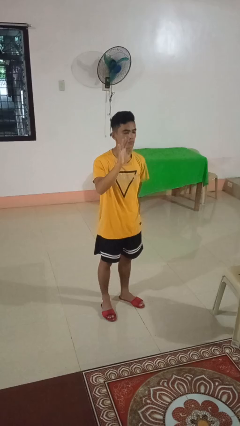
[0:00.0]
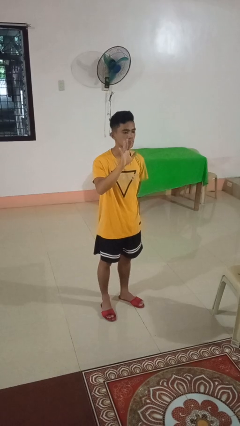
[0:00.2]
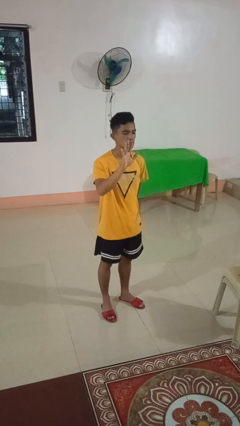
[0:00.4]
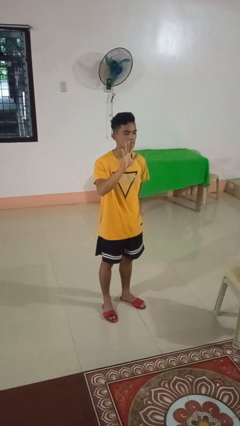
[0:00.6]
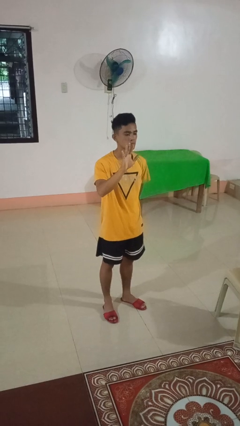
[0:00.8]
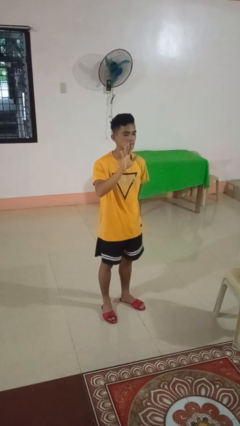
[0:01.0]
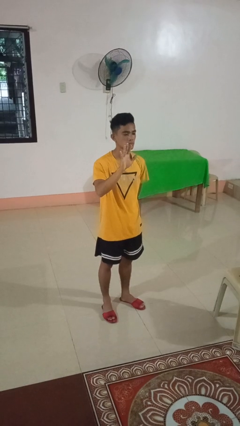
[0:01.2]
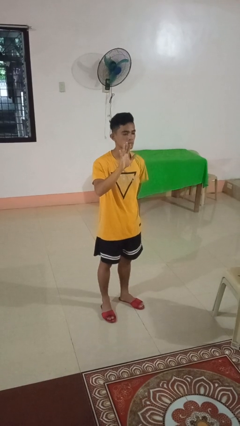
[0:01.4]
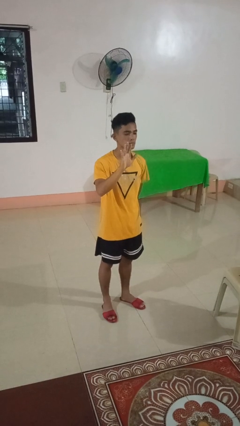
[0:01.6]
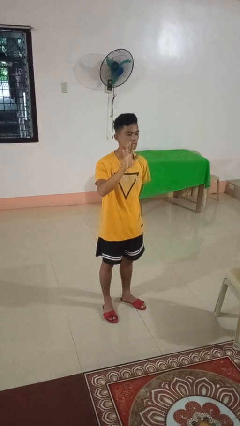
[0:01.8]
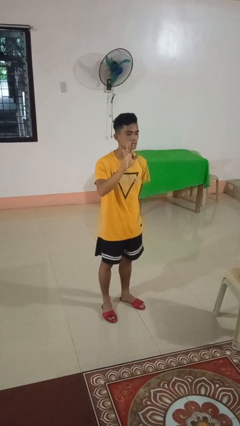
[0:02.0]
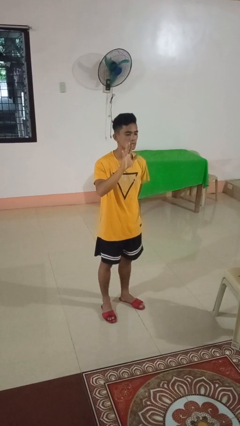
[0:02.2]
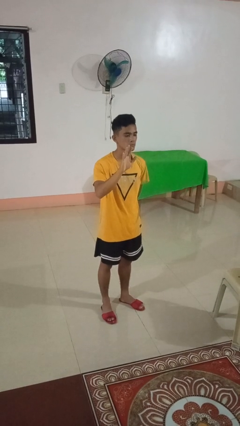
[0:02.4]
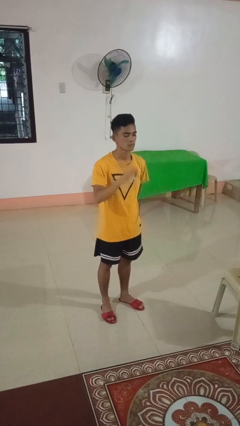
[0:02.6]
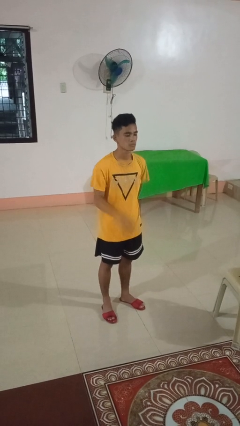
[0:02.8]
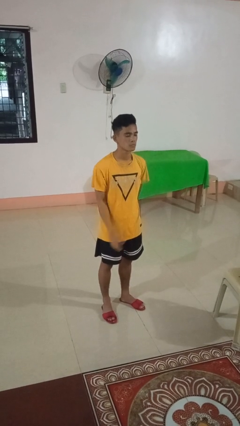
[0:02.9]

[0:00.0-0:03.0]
person gestures number five

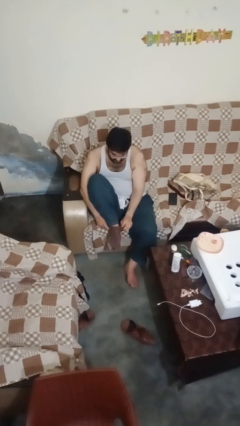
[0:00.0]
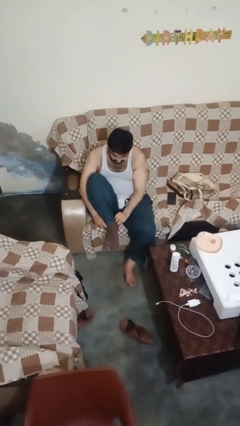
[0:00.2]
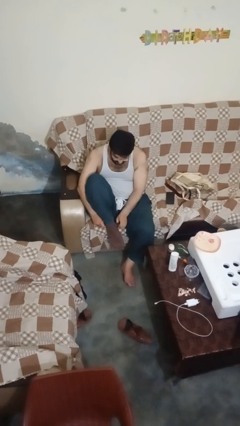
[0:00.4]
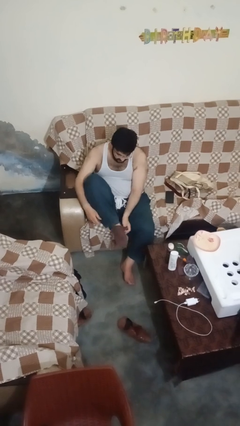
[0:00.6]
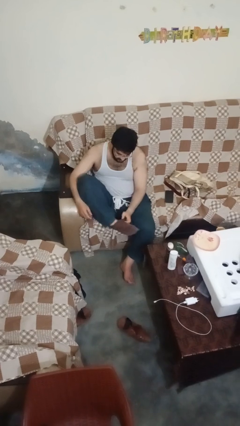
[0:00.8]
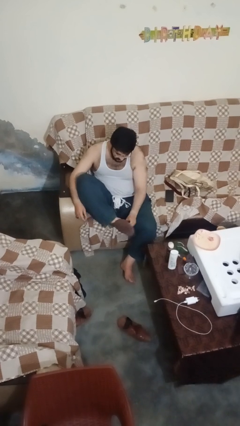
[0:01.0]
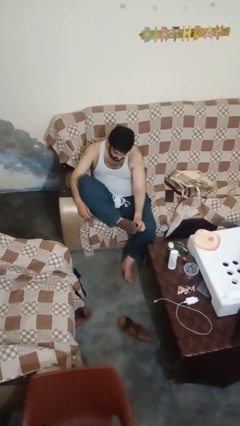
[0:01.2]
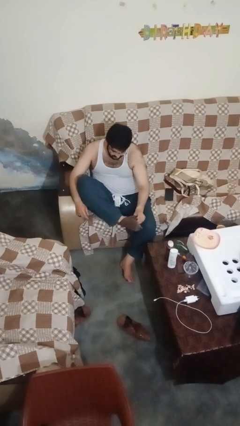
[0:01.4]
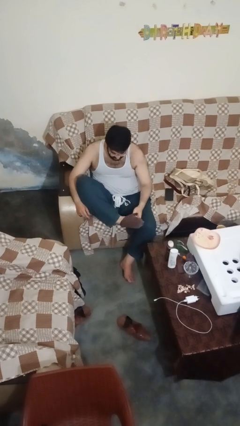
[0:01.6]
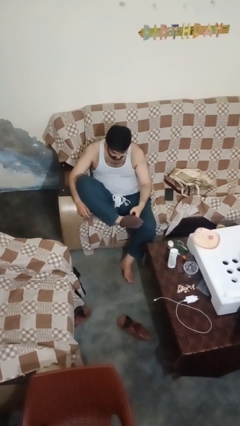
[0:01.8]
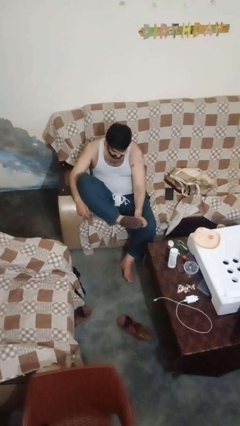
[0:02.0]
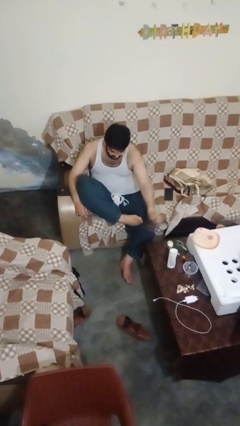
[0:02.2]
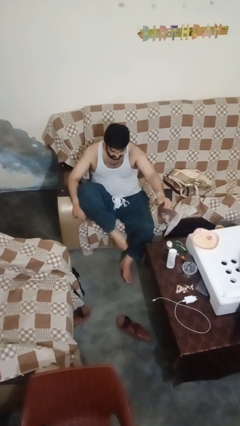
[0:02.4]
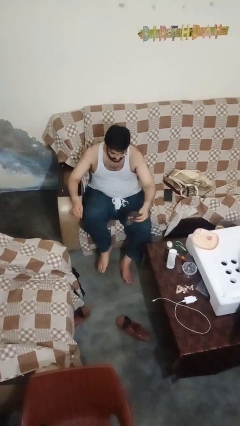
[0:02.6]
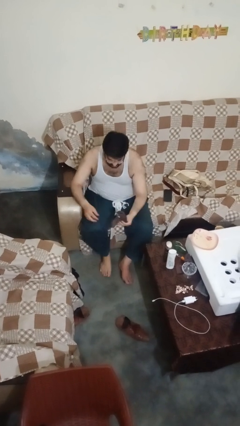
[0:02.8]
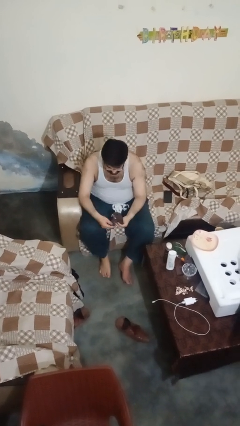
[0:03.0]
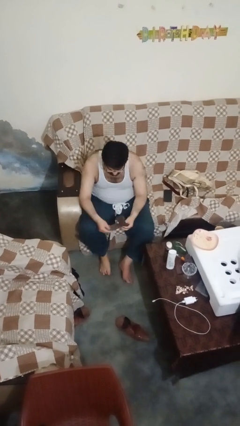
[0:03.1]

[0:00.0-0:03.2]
person takes off socks

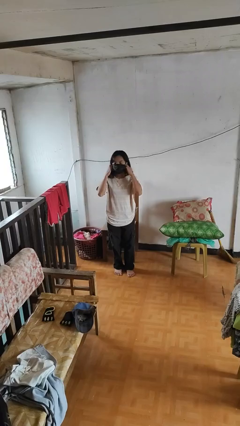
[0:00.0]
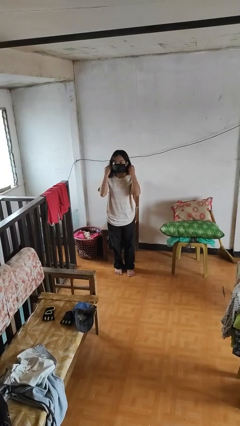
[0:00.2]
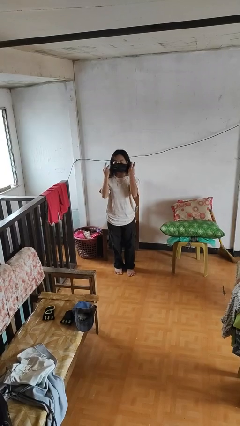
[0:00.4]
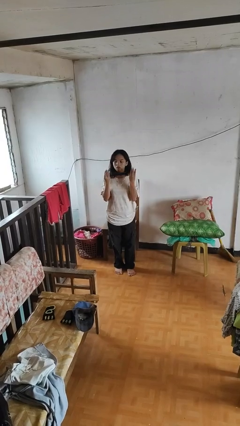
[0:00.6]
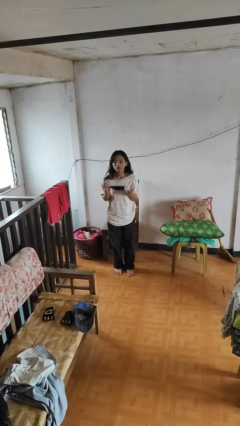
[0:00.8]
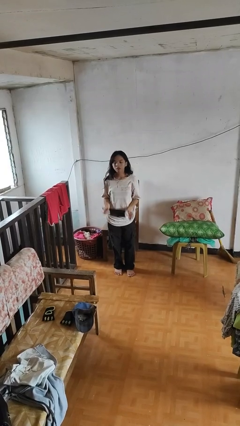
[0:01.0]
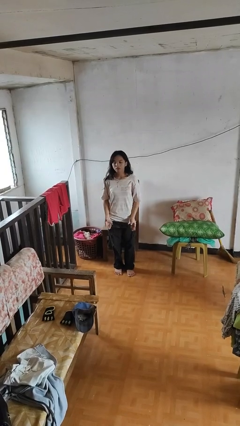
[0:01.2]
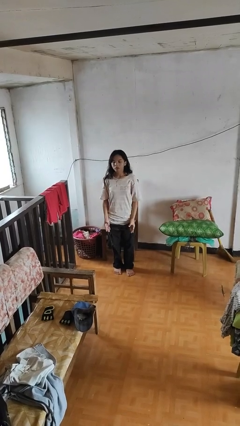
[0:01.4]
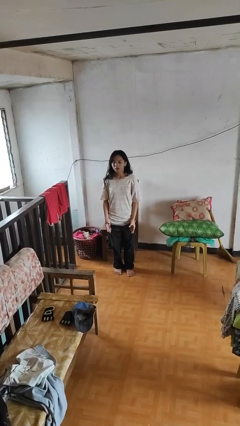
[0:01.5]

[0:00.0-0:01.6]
person takes off facemask

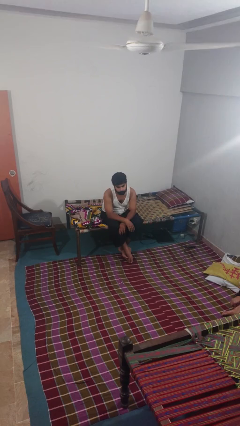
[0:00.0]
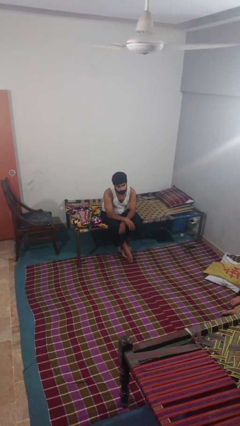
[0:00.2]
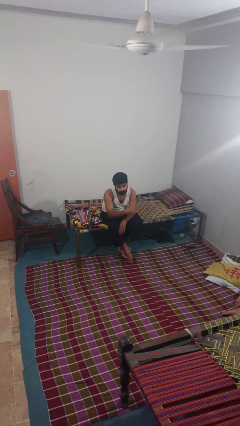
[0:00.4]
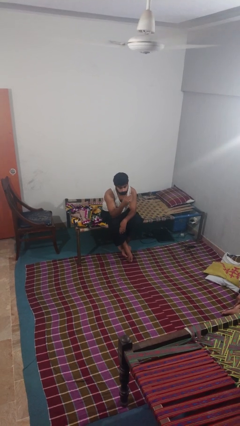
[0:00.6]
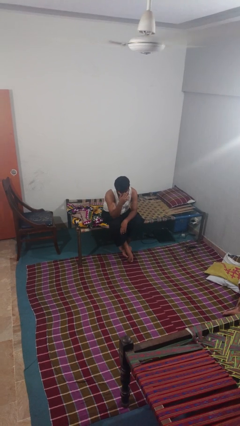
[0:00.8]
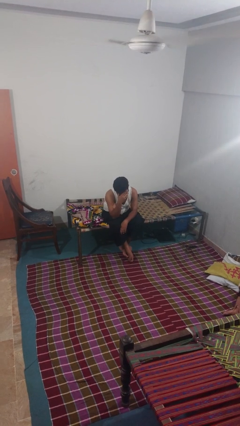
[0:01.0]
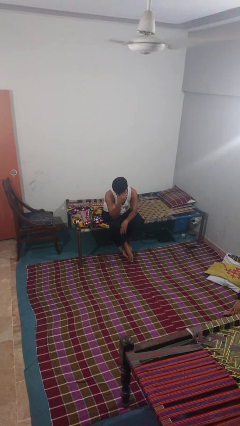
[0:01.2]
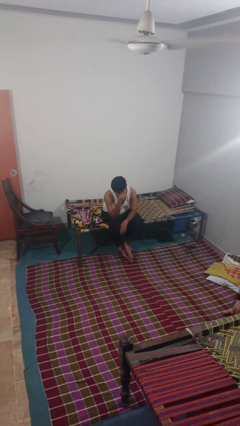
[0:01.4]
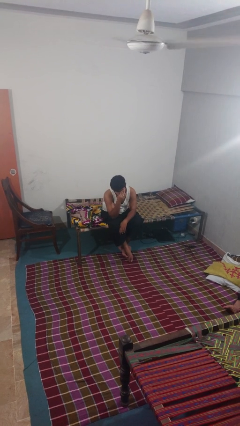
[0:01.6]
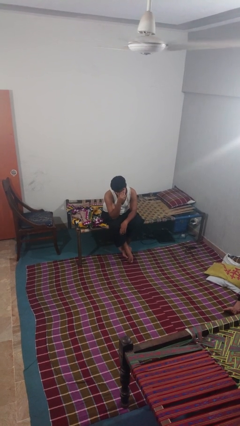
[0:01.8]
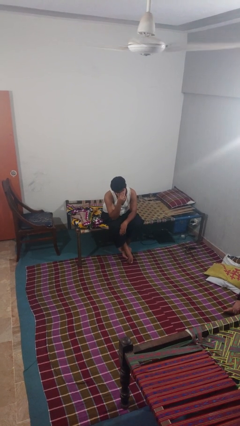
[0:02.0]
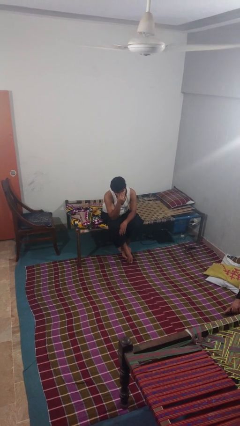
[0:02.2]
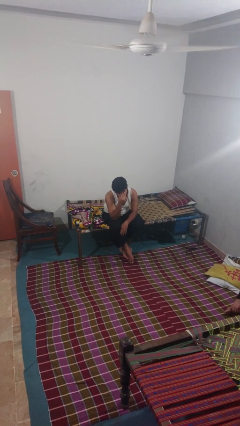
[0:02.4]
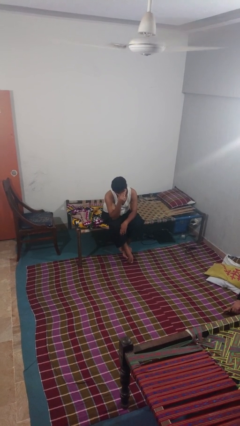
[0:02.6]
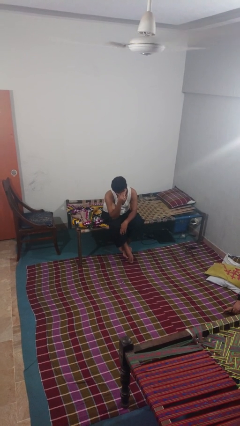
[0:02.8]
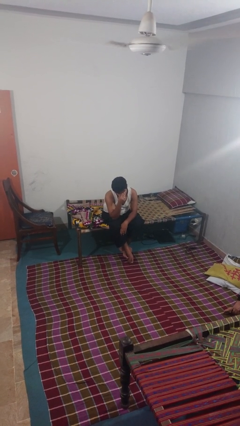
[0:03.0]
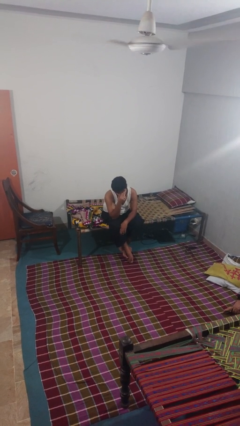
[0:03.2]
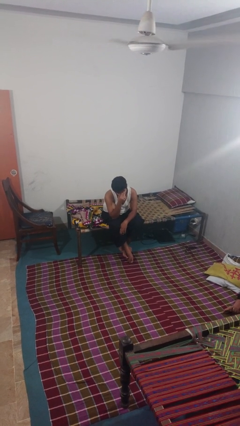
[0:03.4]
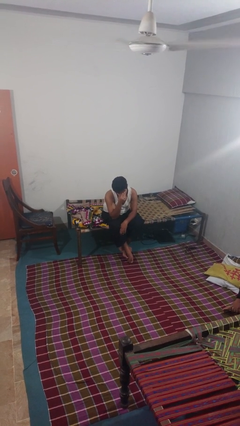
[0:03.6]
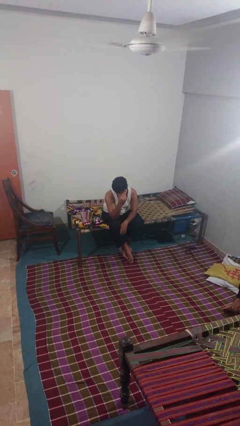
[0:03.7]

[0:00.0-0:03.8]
person covers face with hands

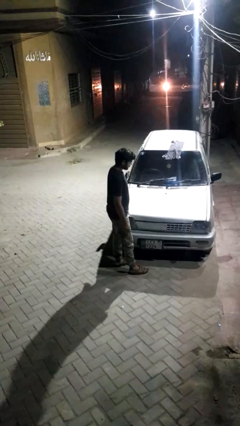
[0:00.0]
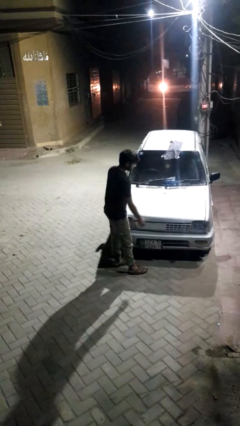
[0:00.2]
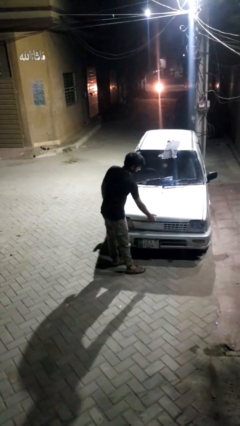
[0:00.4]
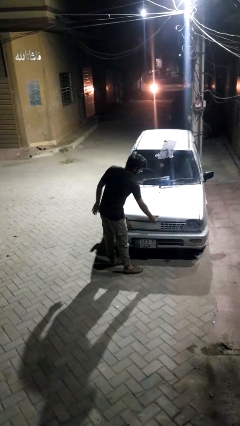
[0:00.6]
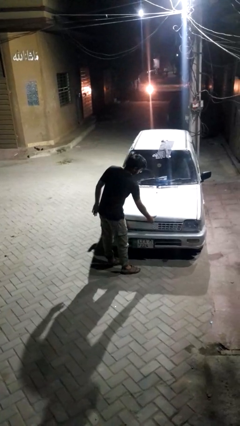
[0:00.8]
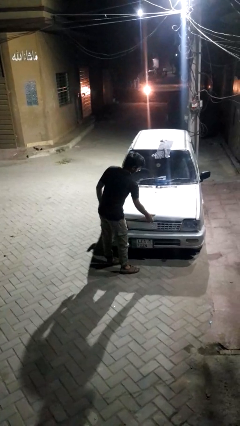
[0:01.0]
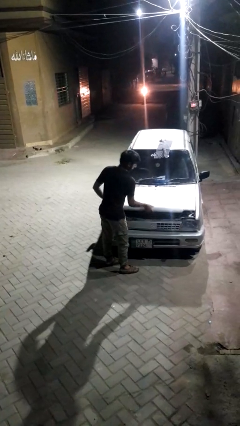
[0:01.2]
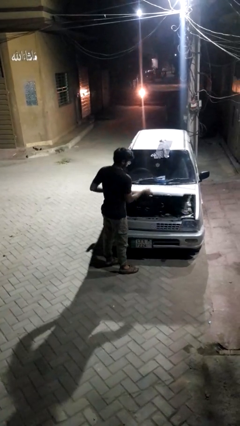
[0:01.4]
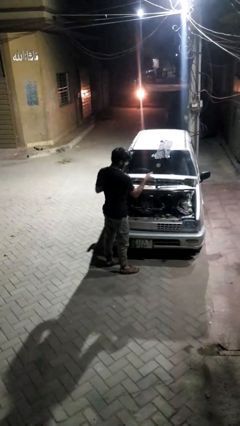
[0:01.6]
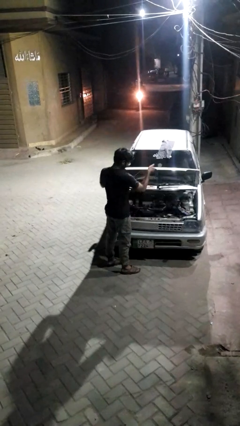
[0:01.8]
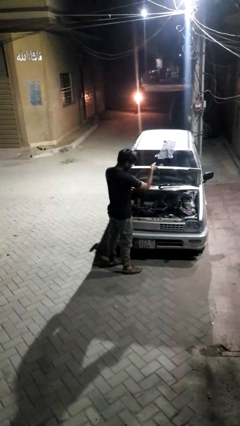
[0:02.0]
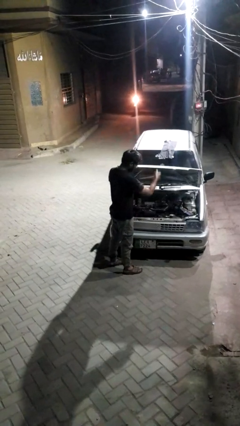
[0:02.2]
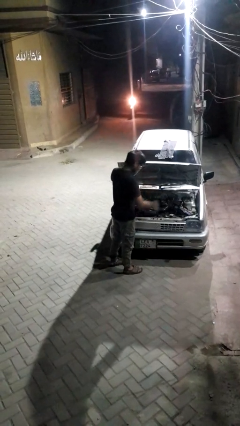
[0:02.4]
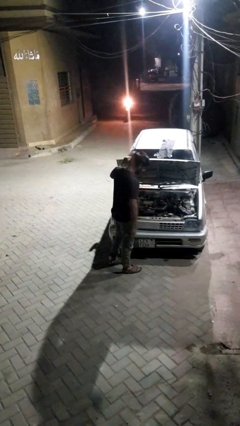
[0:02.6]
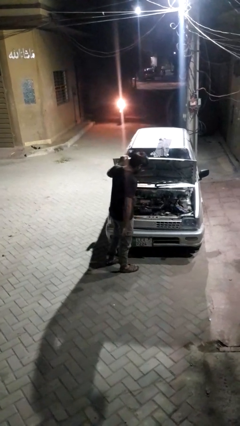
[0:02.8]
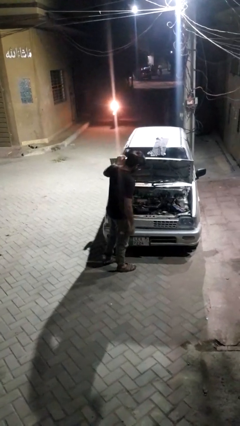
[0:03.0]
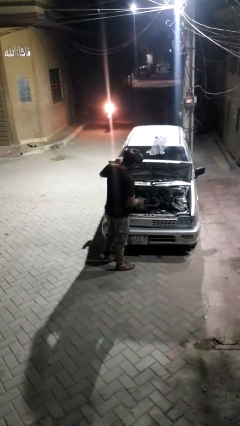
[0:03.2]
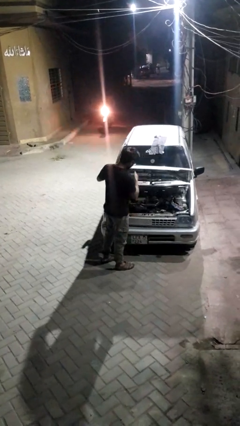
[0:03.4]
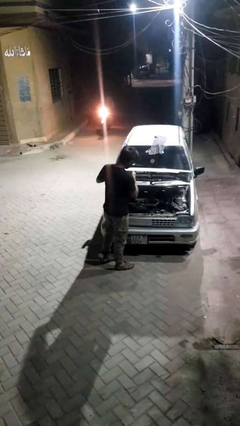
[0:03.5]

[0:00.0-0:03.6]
person opens car hood

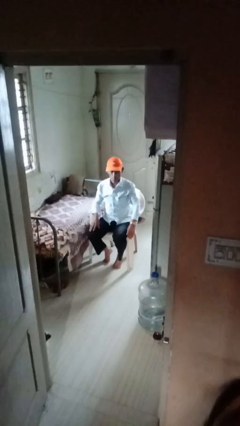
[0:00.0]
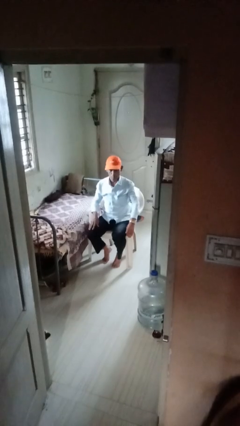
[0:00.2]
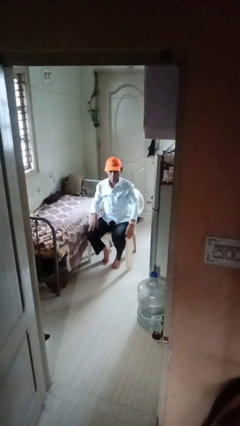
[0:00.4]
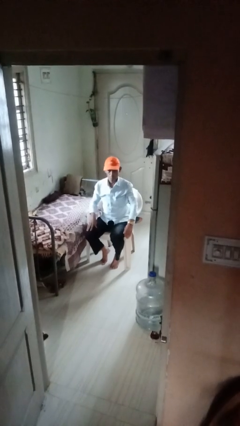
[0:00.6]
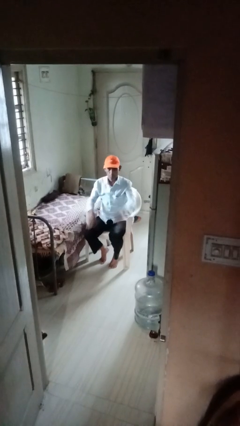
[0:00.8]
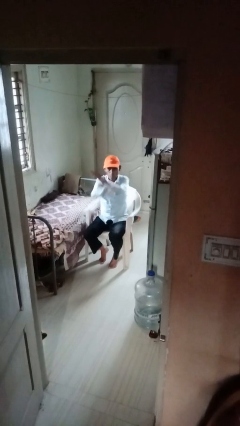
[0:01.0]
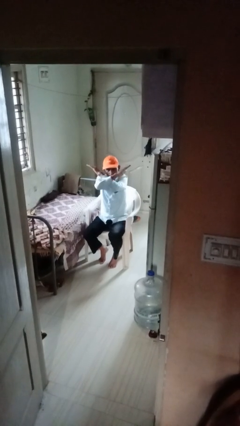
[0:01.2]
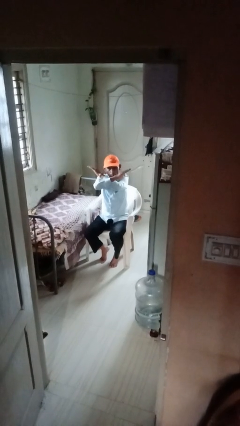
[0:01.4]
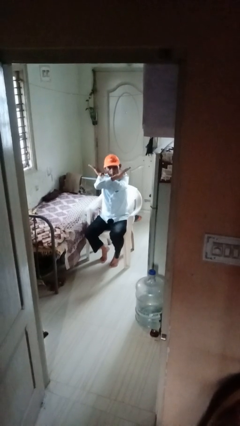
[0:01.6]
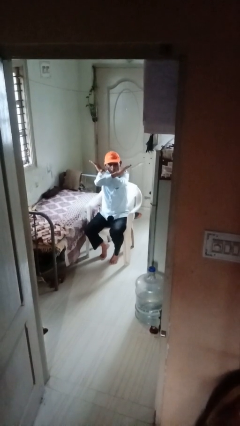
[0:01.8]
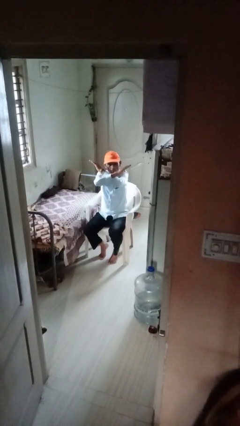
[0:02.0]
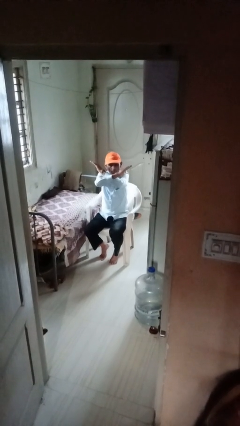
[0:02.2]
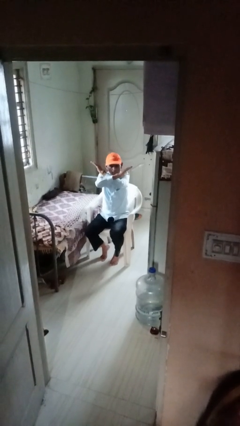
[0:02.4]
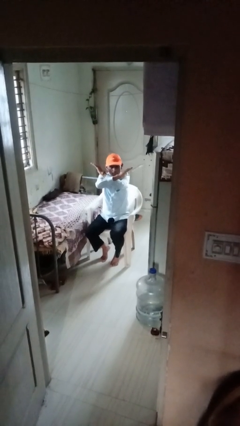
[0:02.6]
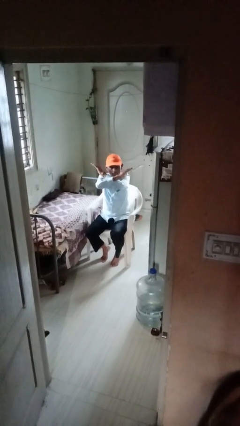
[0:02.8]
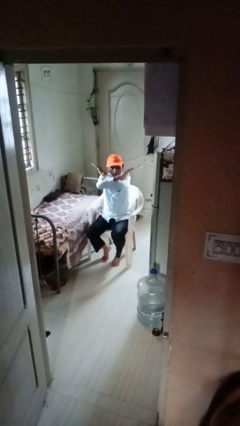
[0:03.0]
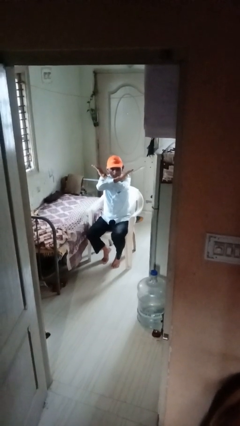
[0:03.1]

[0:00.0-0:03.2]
person gestures arms x
